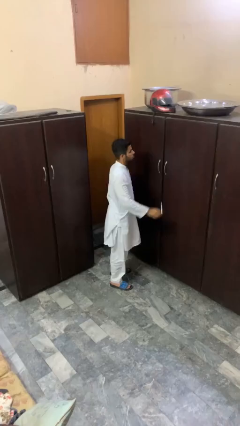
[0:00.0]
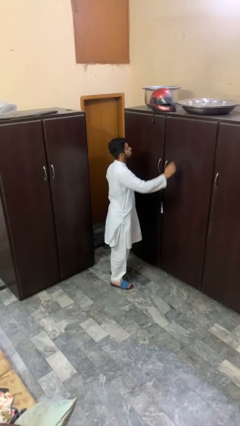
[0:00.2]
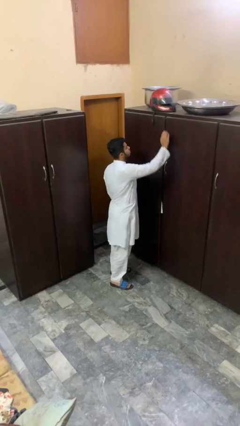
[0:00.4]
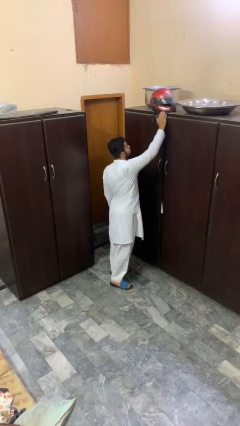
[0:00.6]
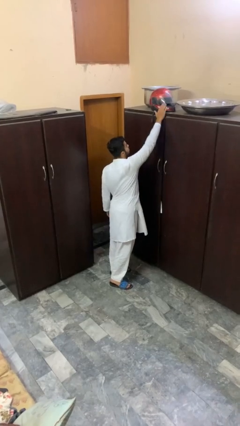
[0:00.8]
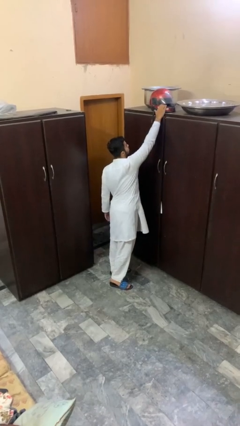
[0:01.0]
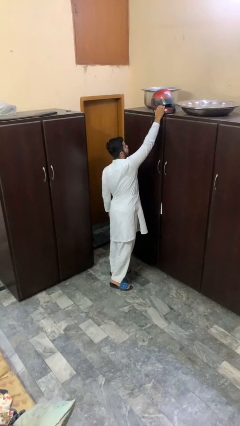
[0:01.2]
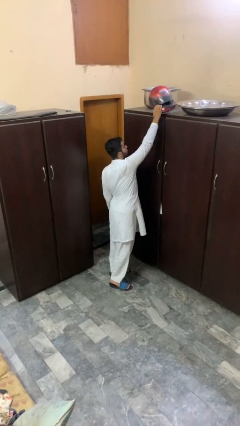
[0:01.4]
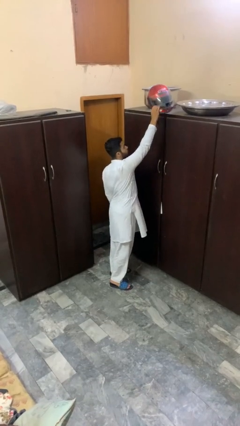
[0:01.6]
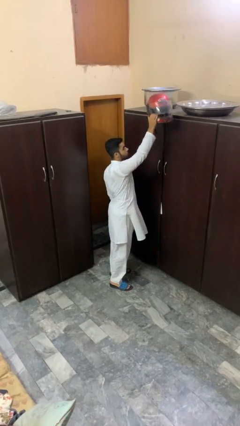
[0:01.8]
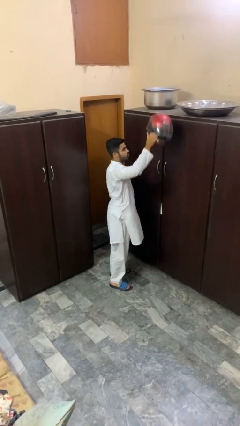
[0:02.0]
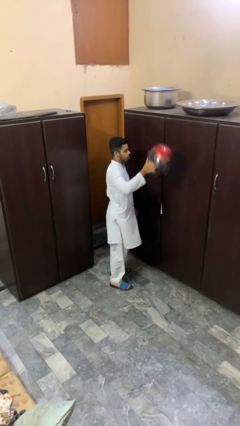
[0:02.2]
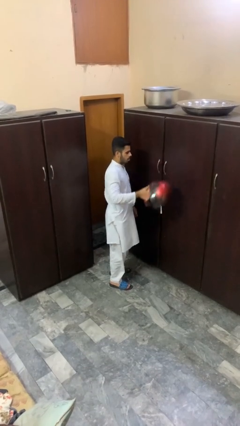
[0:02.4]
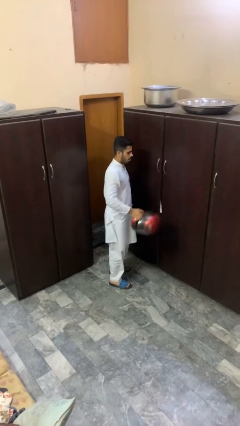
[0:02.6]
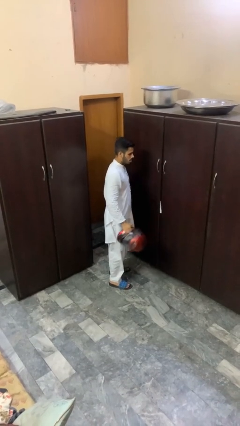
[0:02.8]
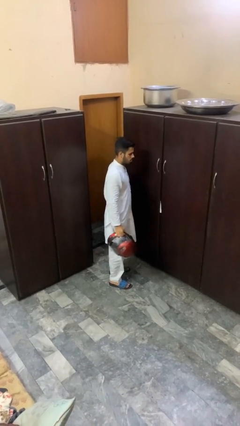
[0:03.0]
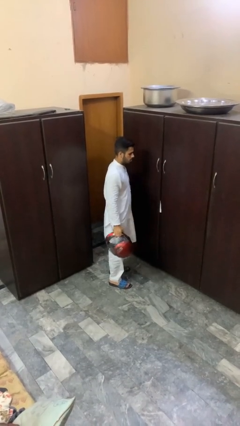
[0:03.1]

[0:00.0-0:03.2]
person picks up object from shelf

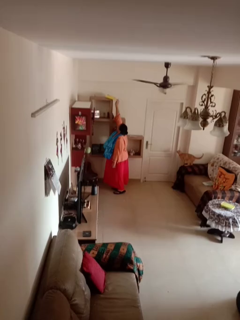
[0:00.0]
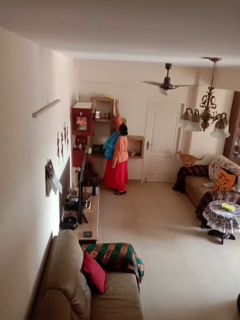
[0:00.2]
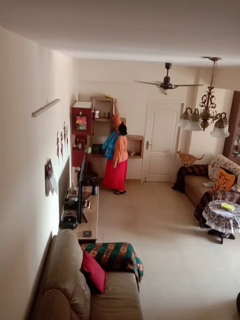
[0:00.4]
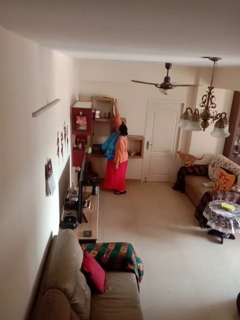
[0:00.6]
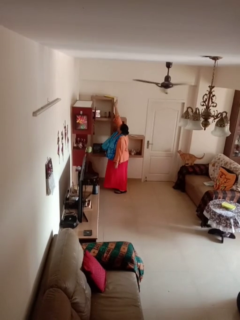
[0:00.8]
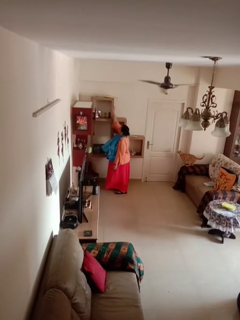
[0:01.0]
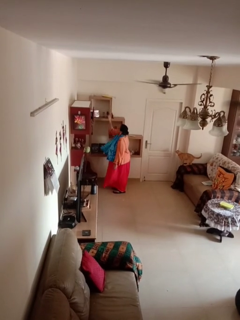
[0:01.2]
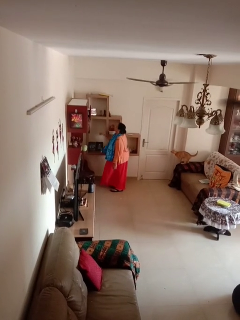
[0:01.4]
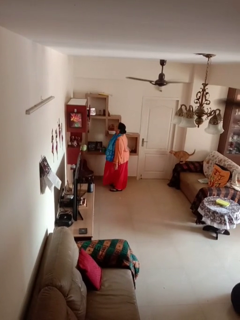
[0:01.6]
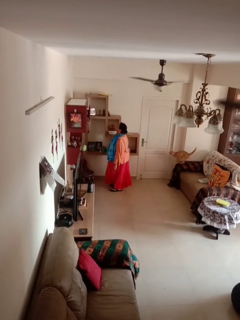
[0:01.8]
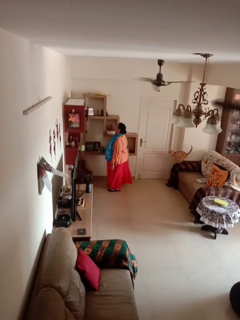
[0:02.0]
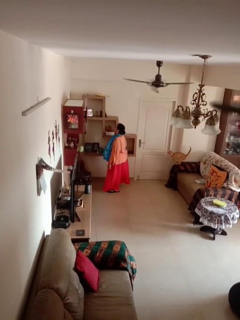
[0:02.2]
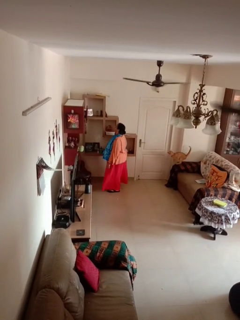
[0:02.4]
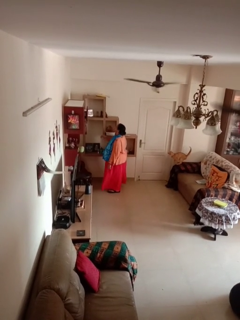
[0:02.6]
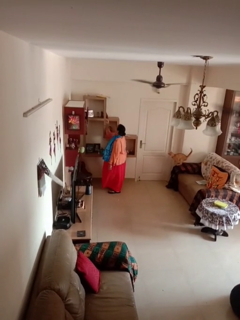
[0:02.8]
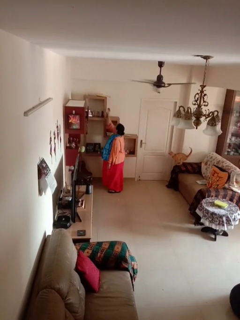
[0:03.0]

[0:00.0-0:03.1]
person puts down object on shelf

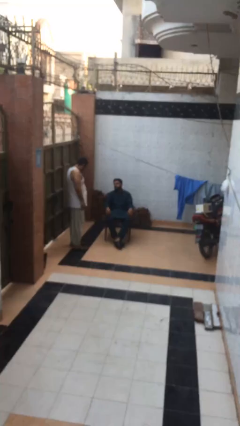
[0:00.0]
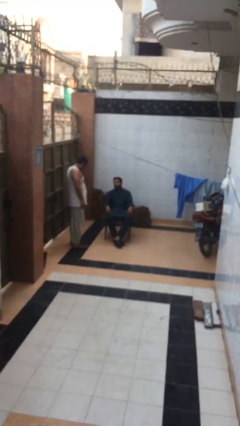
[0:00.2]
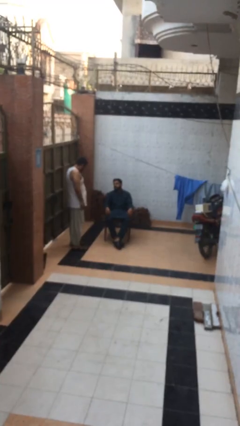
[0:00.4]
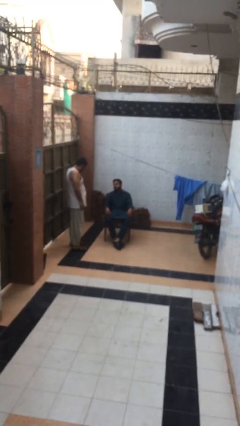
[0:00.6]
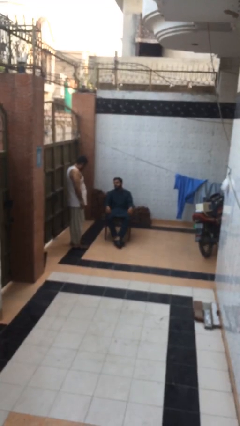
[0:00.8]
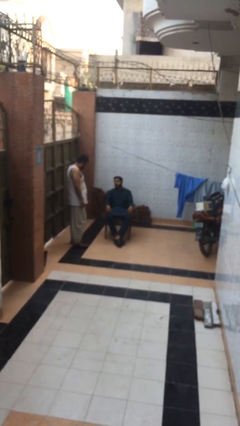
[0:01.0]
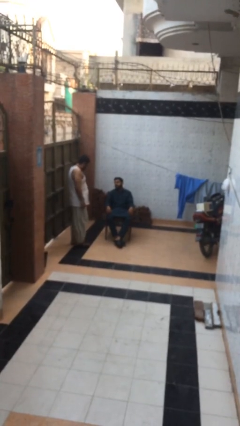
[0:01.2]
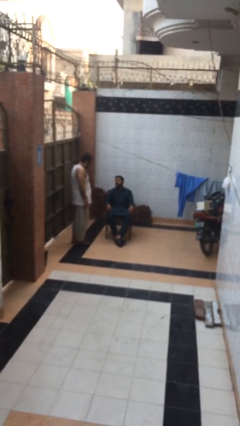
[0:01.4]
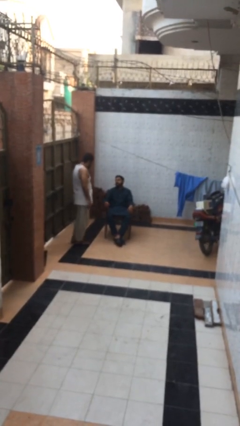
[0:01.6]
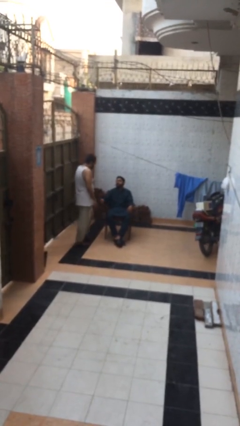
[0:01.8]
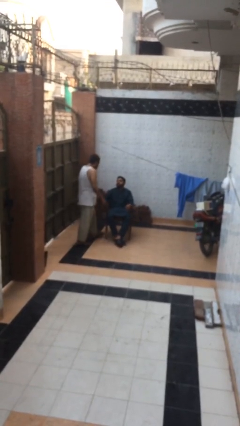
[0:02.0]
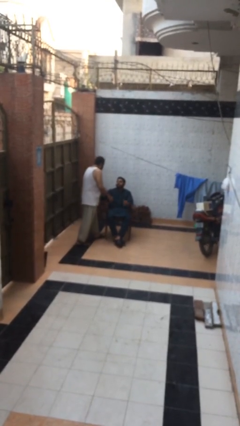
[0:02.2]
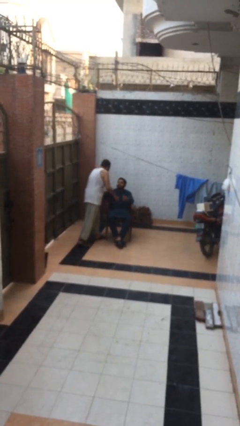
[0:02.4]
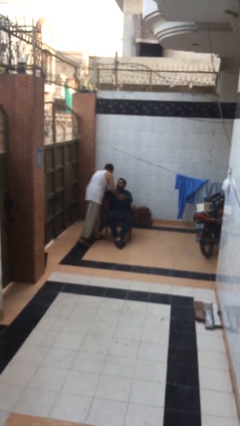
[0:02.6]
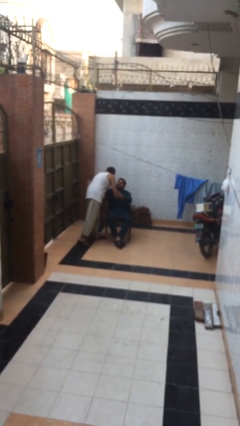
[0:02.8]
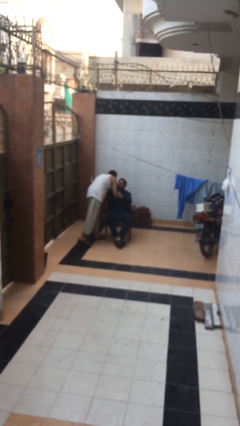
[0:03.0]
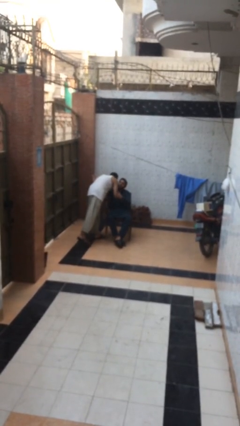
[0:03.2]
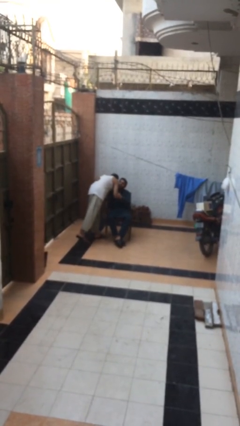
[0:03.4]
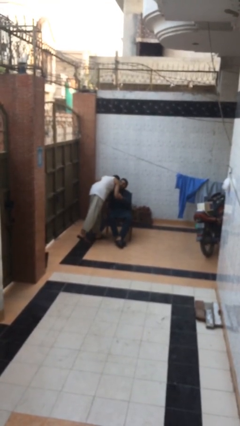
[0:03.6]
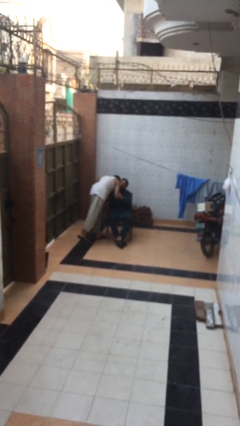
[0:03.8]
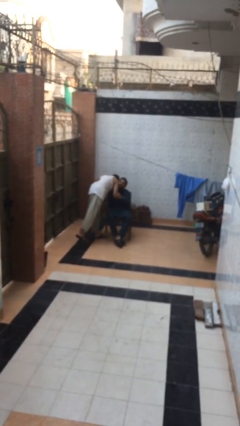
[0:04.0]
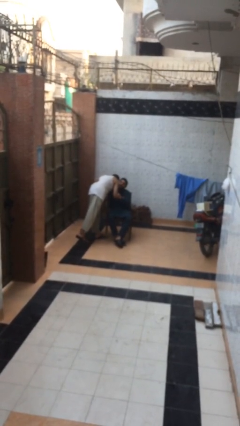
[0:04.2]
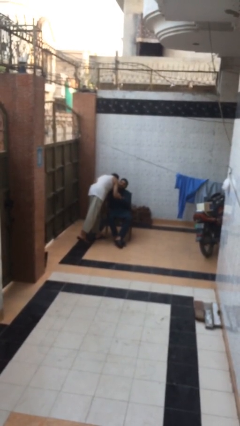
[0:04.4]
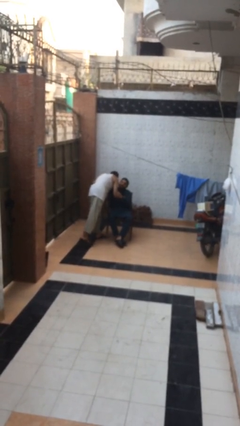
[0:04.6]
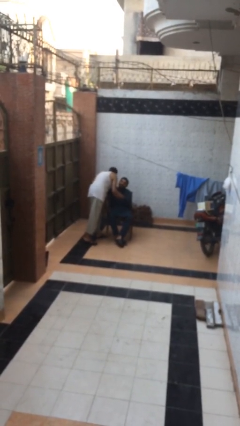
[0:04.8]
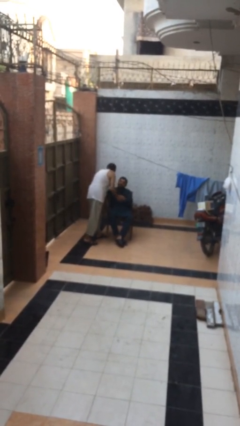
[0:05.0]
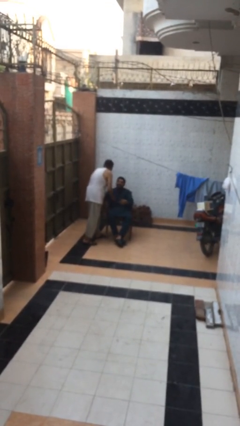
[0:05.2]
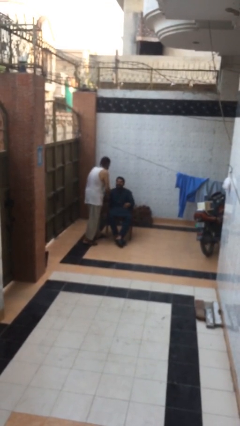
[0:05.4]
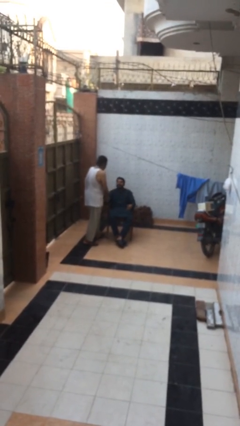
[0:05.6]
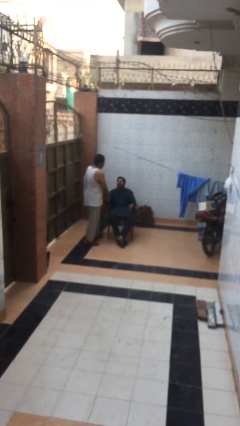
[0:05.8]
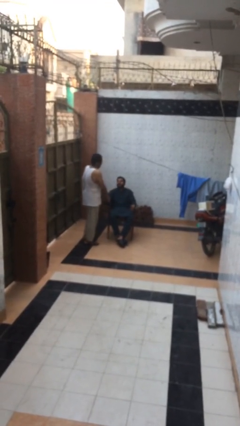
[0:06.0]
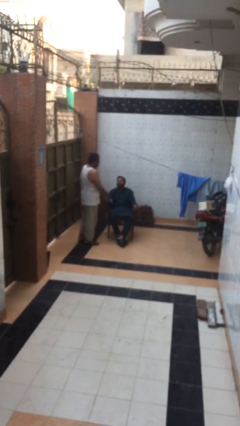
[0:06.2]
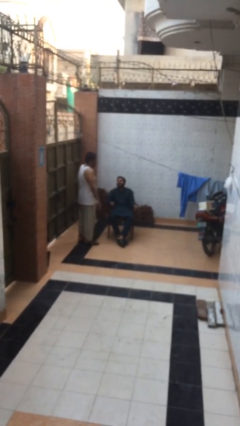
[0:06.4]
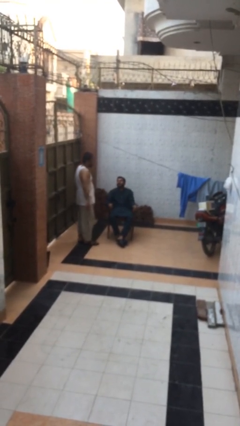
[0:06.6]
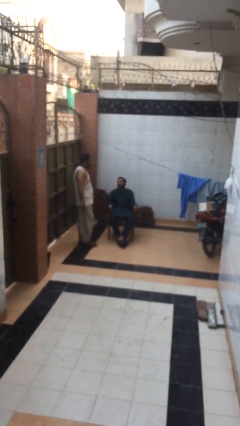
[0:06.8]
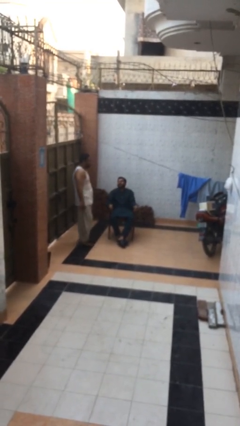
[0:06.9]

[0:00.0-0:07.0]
person embraces person

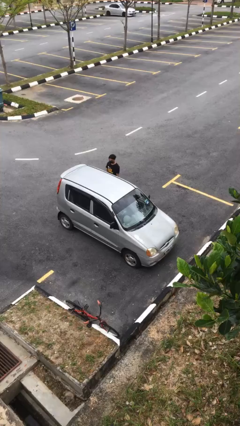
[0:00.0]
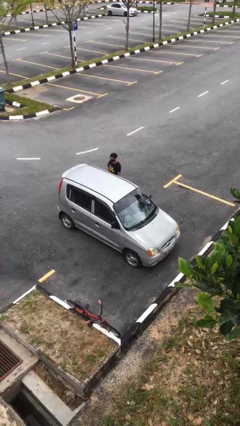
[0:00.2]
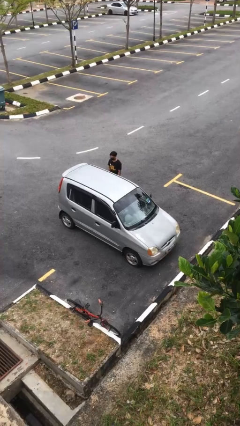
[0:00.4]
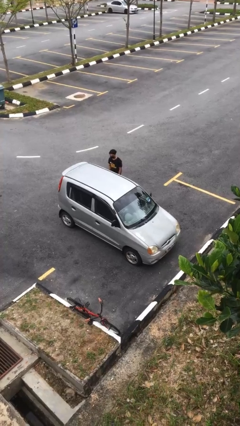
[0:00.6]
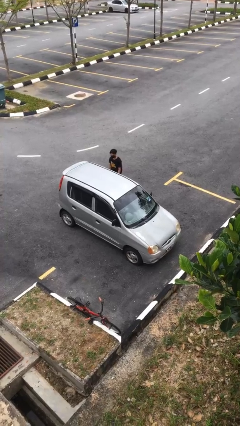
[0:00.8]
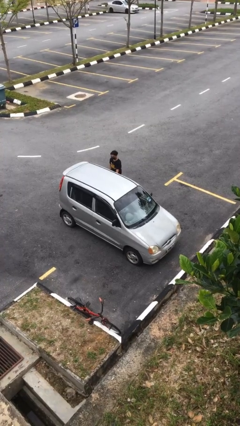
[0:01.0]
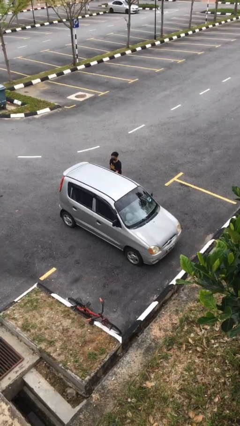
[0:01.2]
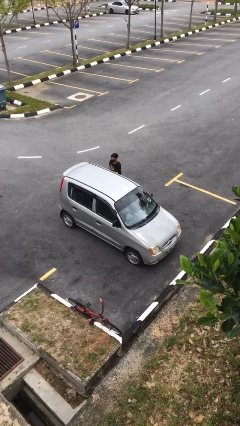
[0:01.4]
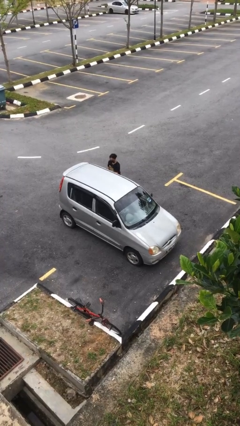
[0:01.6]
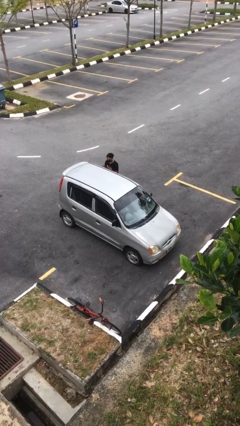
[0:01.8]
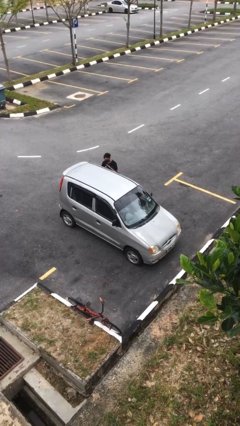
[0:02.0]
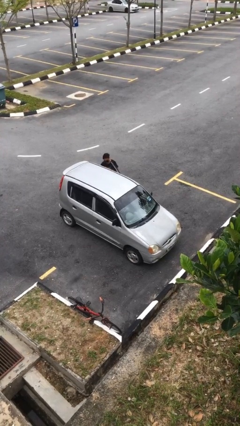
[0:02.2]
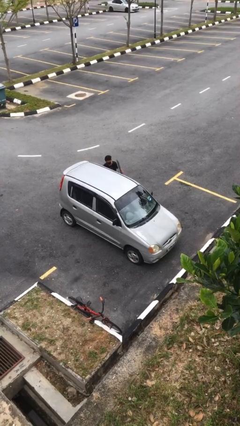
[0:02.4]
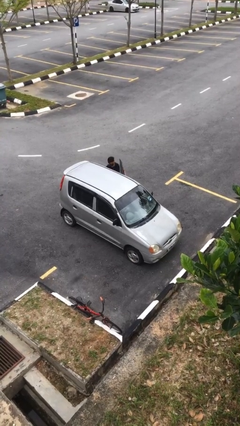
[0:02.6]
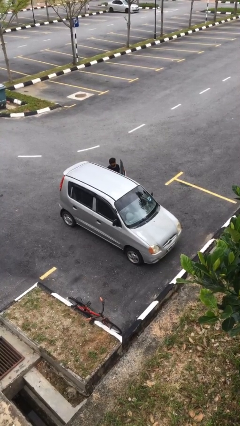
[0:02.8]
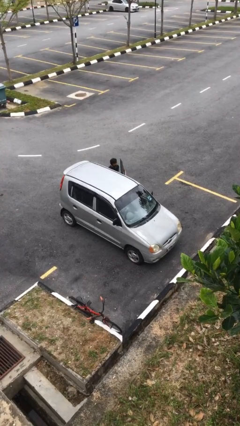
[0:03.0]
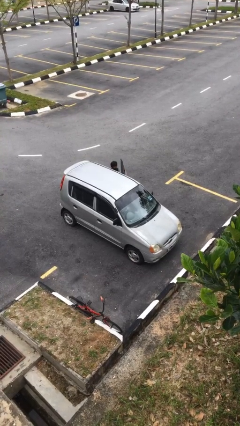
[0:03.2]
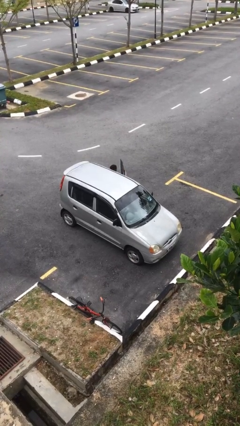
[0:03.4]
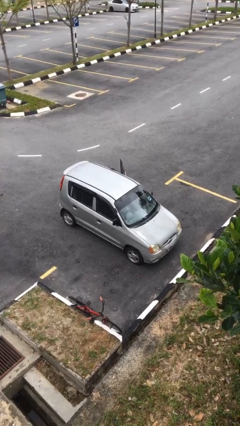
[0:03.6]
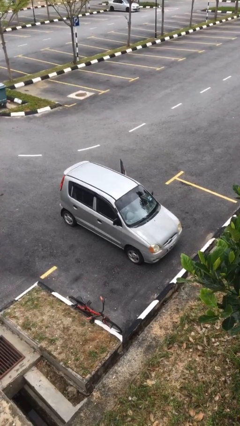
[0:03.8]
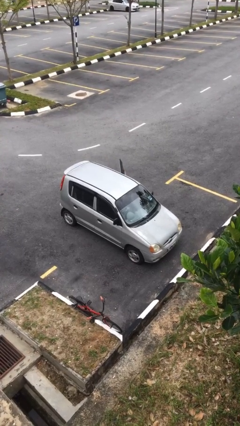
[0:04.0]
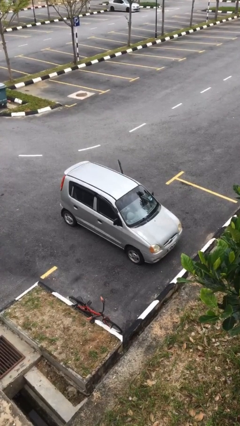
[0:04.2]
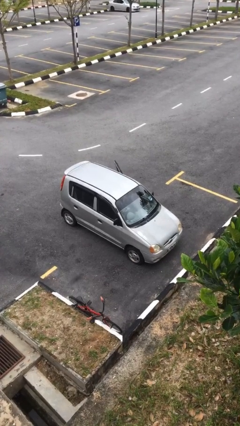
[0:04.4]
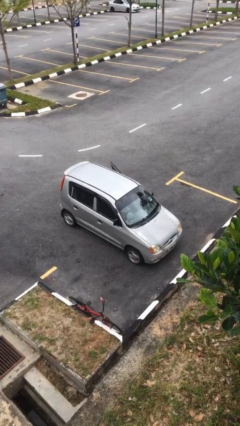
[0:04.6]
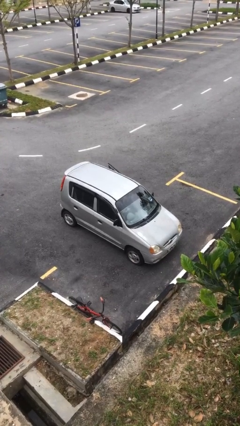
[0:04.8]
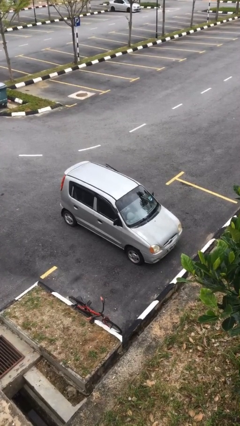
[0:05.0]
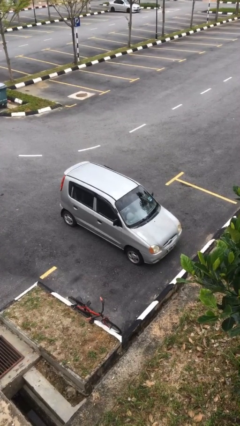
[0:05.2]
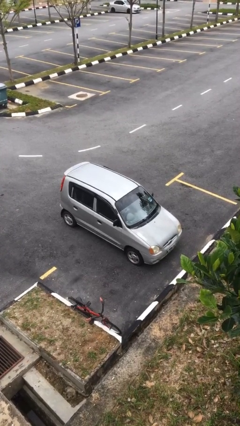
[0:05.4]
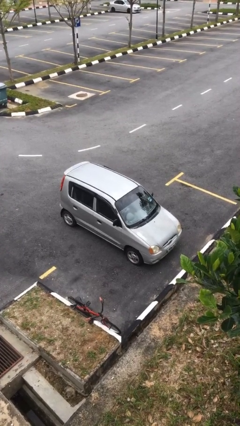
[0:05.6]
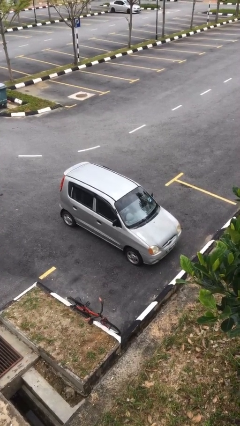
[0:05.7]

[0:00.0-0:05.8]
car picks up person
